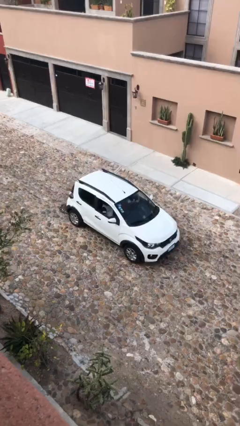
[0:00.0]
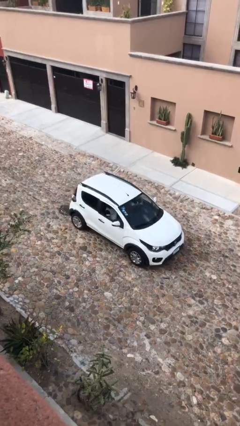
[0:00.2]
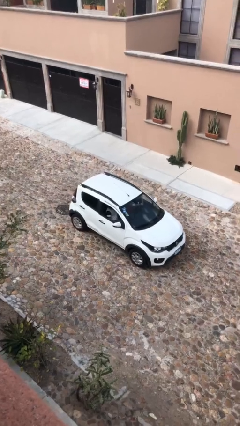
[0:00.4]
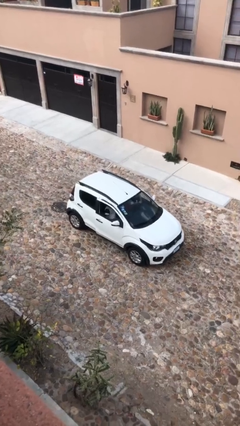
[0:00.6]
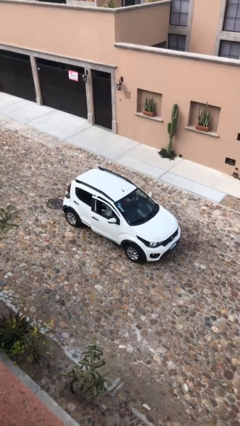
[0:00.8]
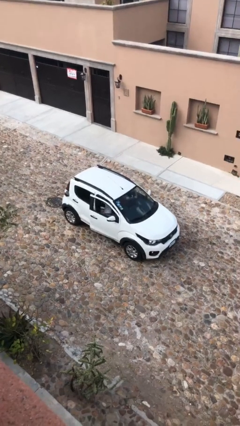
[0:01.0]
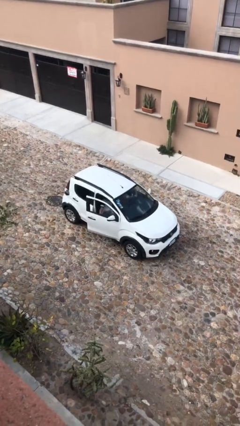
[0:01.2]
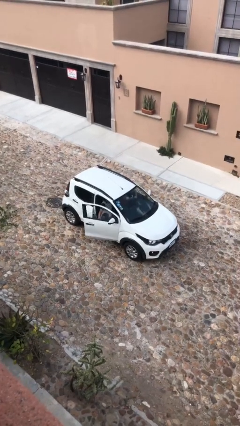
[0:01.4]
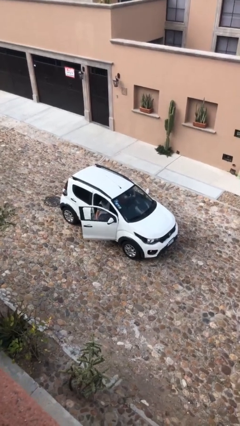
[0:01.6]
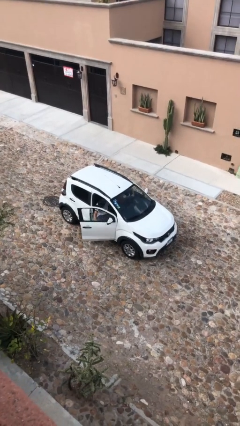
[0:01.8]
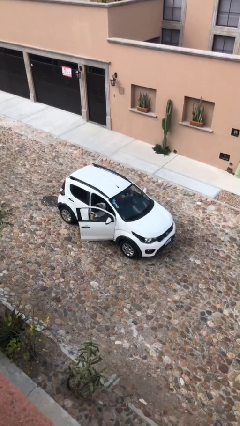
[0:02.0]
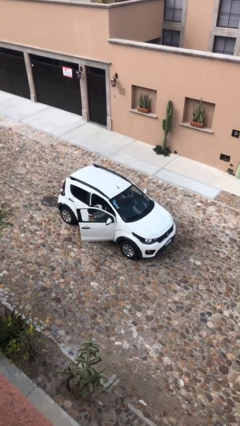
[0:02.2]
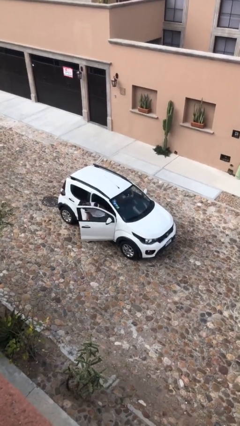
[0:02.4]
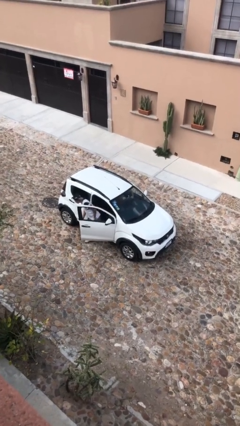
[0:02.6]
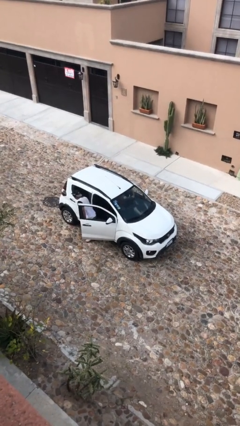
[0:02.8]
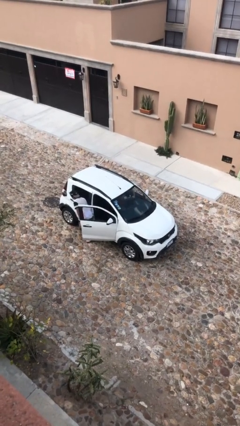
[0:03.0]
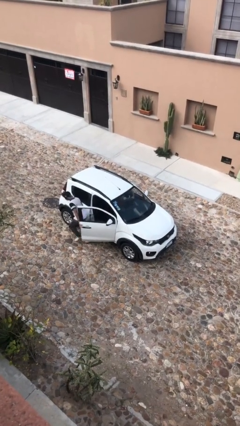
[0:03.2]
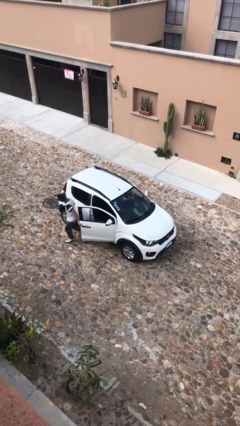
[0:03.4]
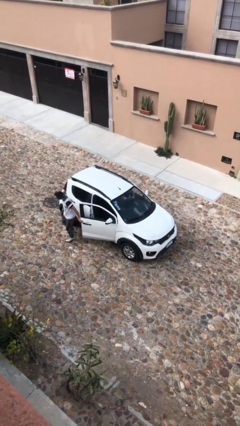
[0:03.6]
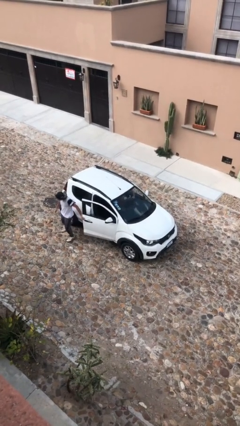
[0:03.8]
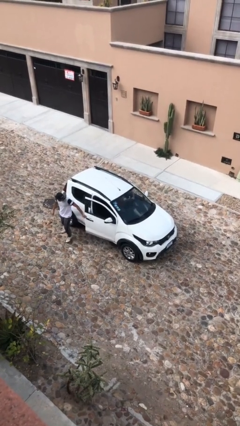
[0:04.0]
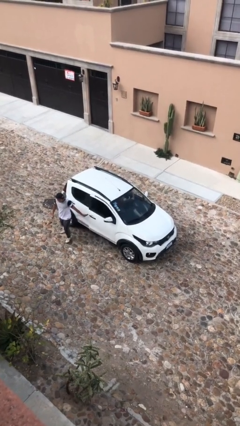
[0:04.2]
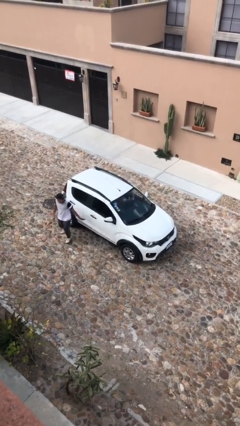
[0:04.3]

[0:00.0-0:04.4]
car drops off person

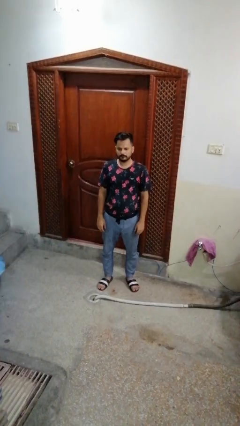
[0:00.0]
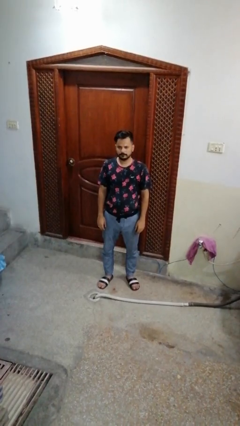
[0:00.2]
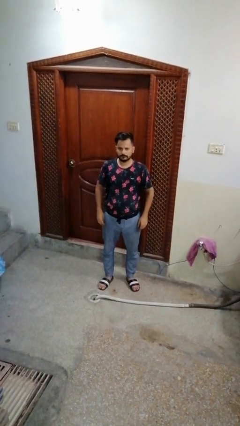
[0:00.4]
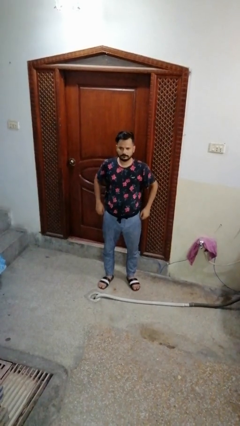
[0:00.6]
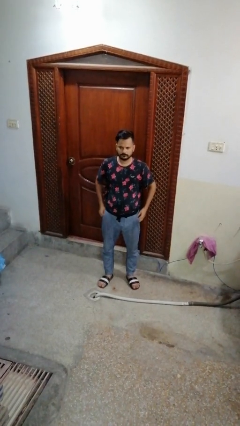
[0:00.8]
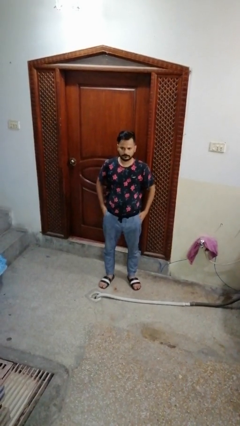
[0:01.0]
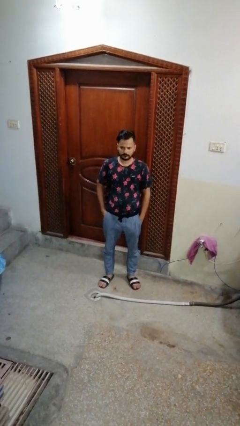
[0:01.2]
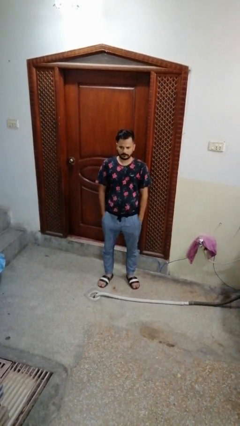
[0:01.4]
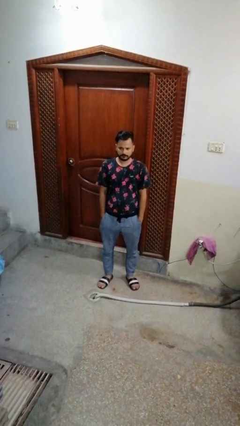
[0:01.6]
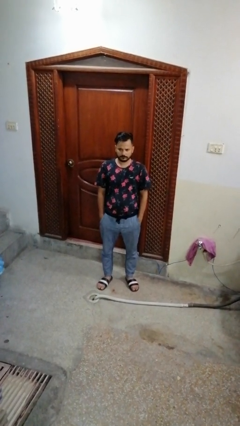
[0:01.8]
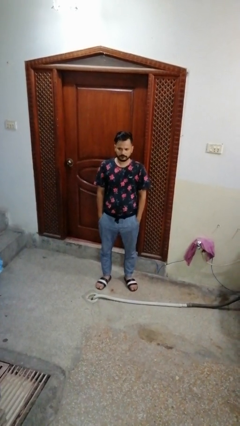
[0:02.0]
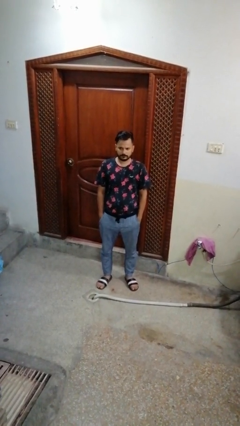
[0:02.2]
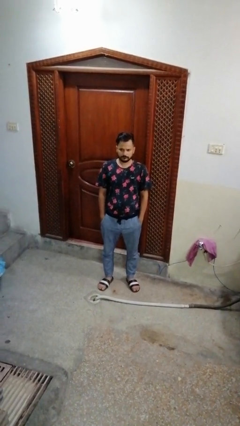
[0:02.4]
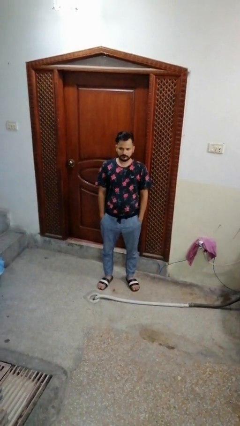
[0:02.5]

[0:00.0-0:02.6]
person puts hands in back pockets

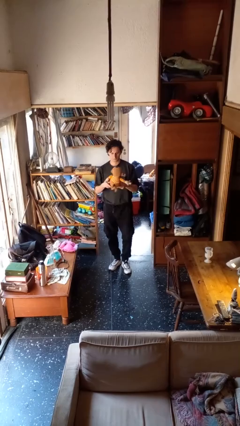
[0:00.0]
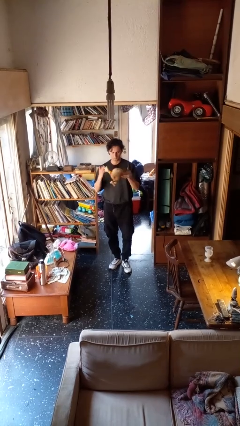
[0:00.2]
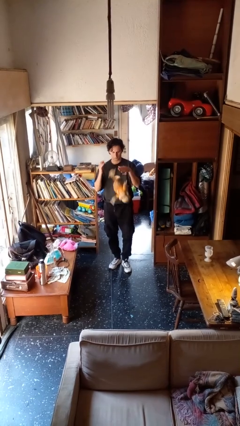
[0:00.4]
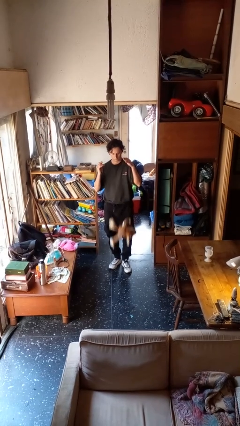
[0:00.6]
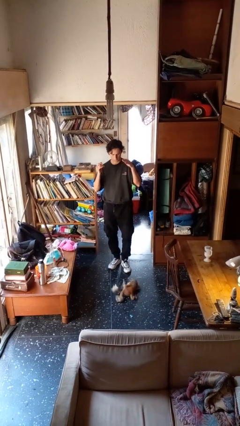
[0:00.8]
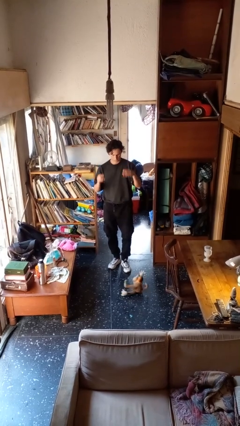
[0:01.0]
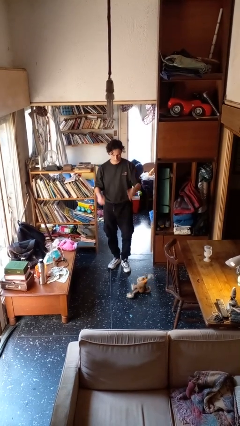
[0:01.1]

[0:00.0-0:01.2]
person drops object

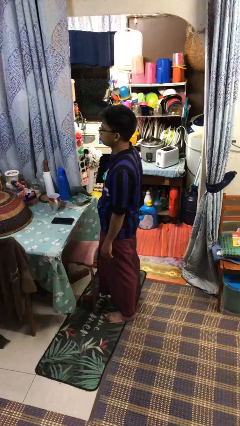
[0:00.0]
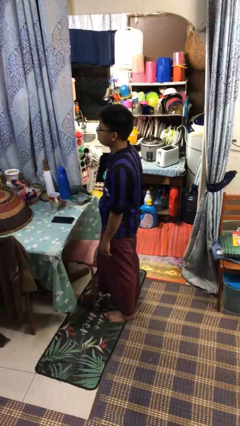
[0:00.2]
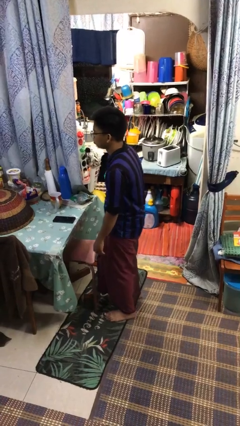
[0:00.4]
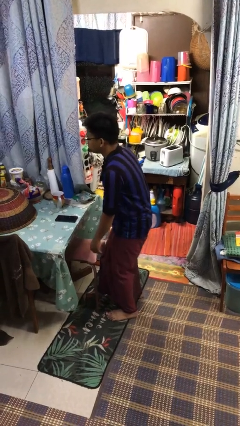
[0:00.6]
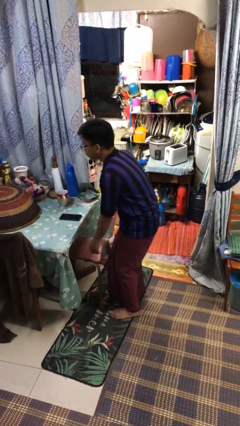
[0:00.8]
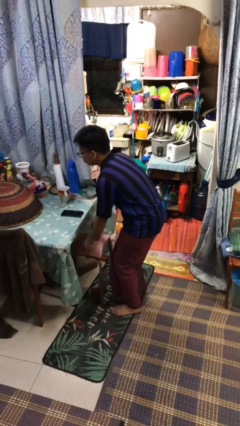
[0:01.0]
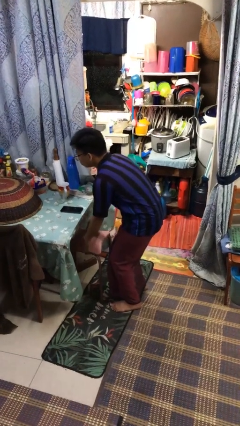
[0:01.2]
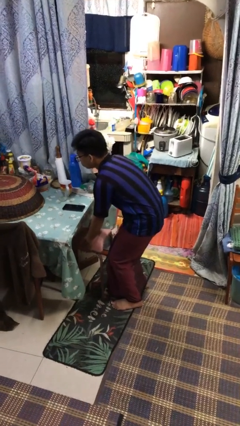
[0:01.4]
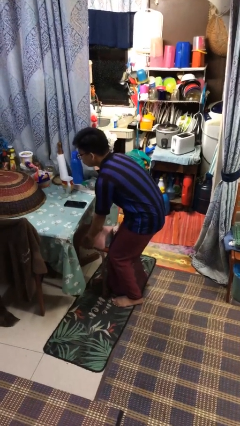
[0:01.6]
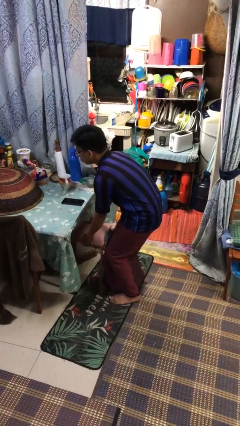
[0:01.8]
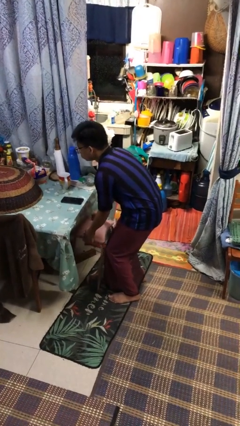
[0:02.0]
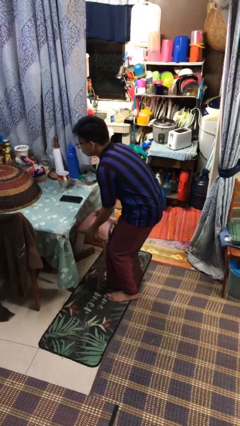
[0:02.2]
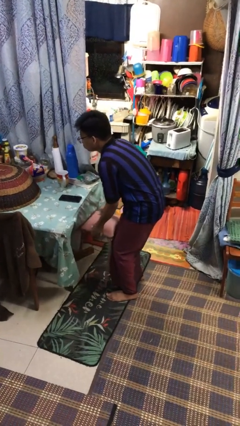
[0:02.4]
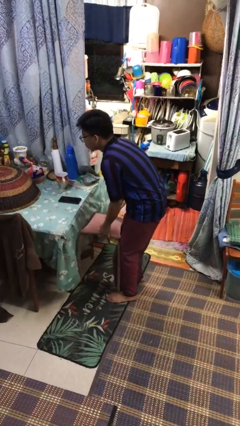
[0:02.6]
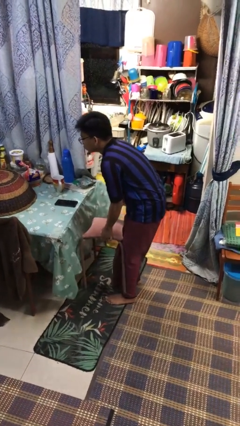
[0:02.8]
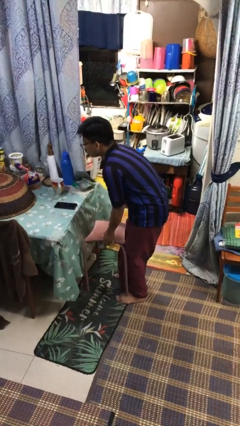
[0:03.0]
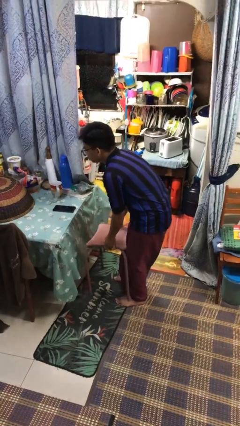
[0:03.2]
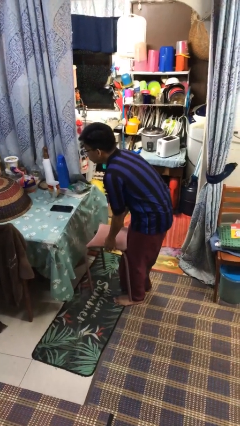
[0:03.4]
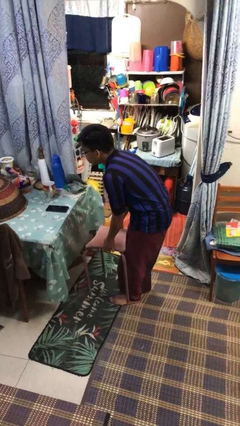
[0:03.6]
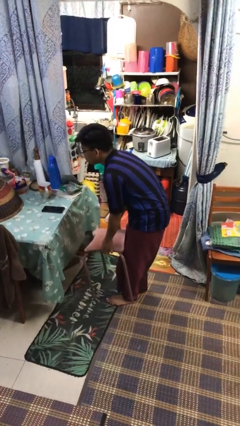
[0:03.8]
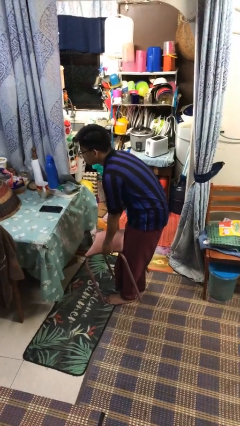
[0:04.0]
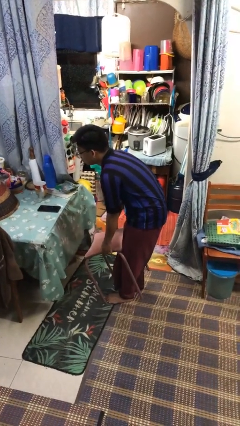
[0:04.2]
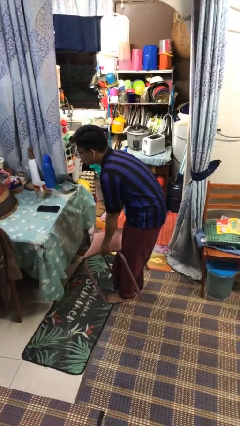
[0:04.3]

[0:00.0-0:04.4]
person pulls out chair

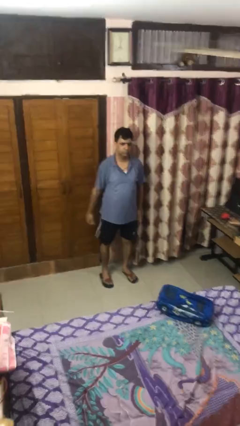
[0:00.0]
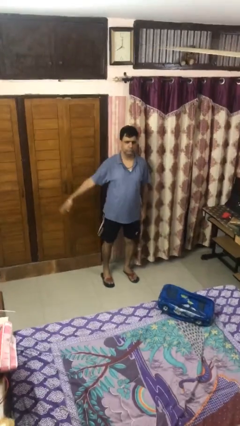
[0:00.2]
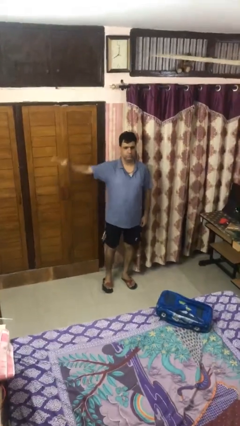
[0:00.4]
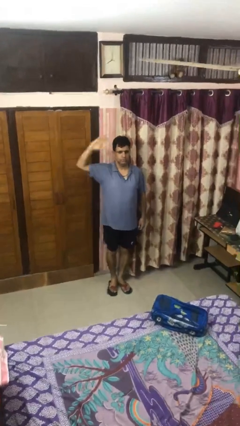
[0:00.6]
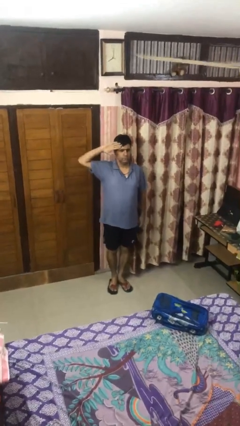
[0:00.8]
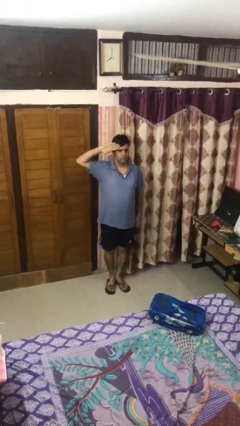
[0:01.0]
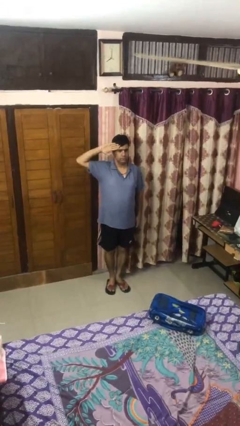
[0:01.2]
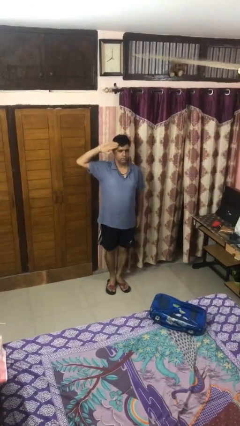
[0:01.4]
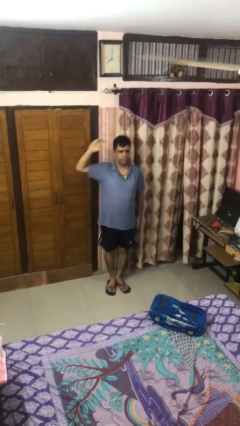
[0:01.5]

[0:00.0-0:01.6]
person salutes

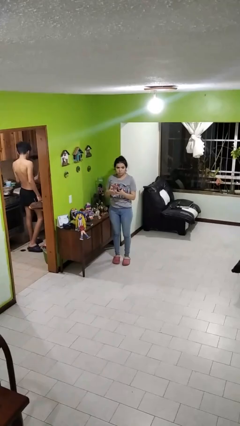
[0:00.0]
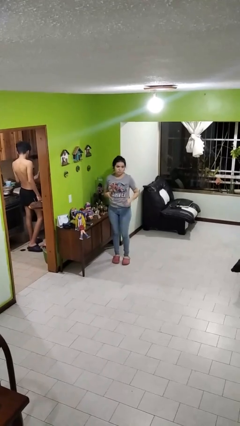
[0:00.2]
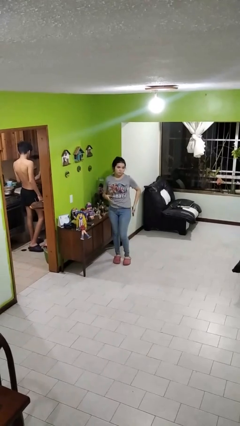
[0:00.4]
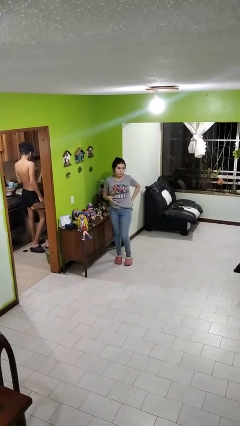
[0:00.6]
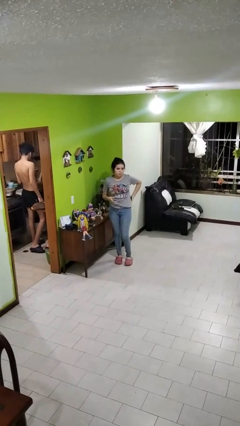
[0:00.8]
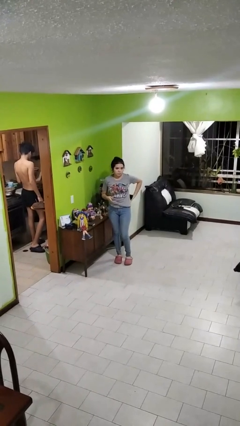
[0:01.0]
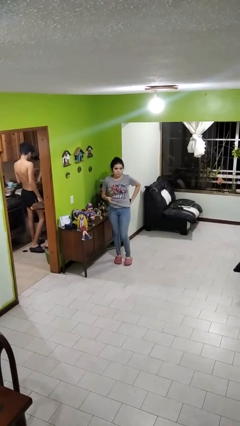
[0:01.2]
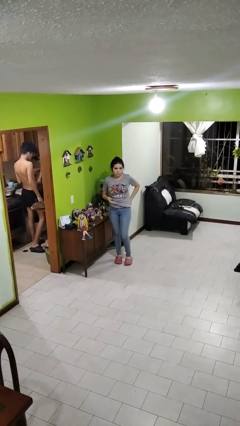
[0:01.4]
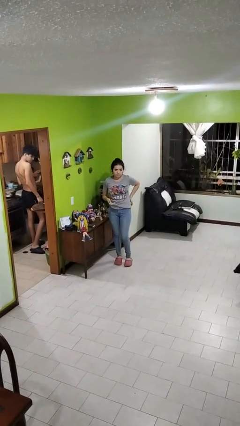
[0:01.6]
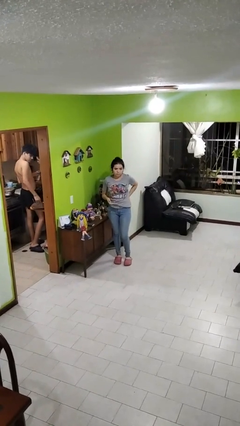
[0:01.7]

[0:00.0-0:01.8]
person puts phone into pocket

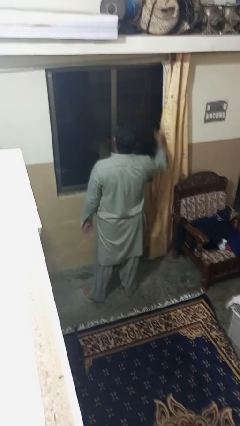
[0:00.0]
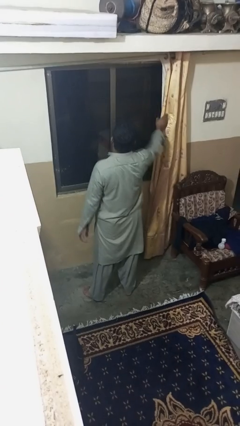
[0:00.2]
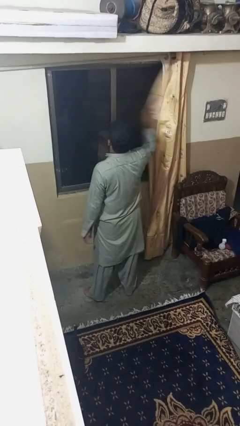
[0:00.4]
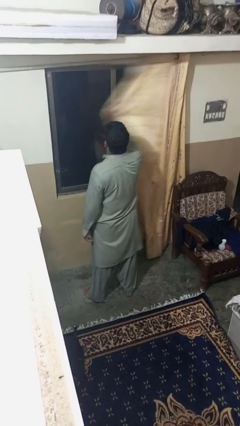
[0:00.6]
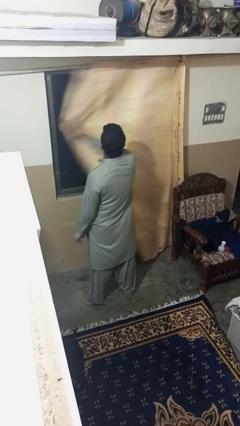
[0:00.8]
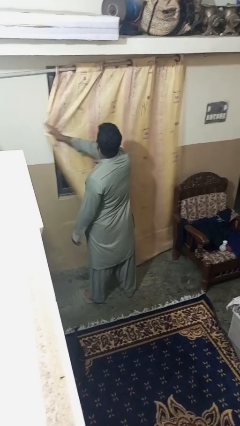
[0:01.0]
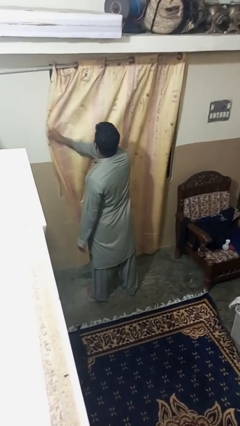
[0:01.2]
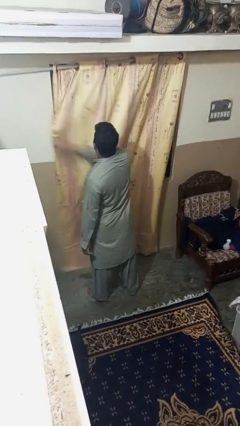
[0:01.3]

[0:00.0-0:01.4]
person closes curtains
